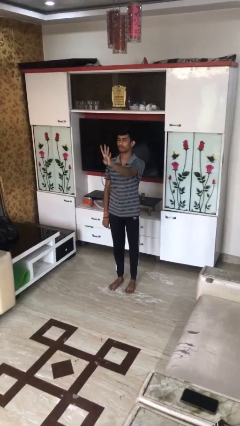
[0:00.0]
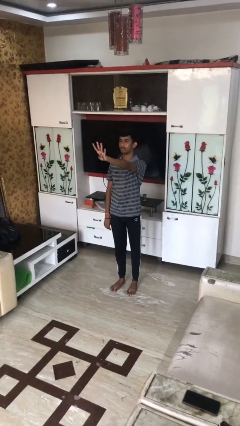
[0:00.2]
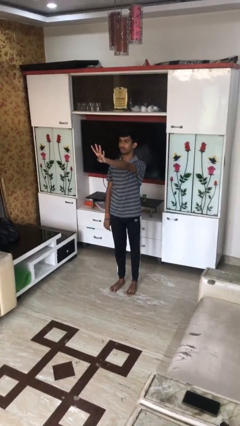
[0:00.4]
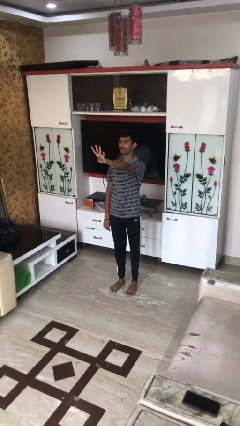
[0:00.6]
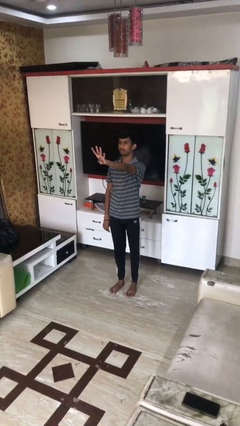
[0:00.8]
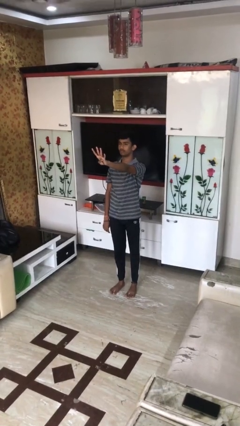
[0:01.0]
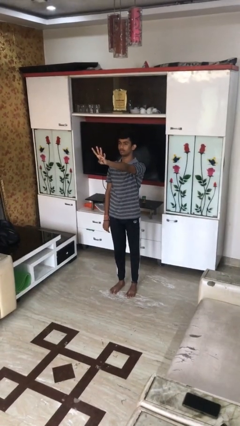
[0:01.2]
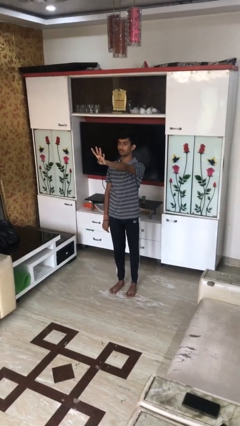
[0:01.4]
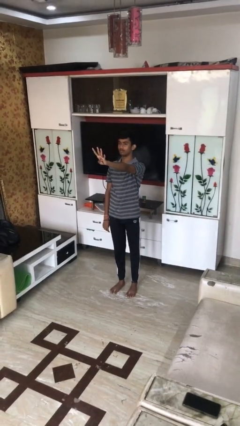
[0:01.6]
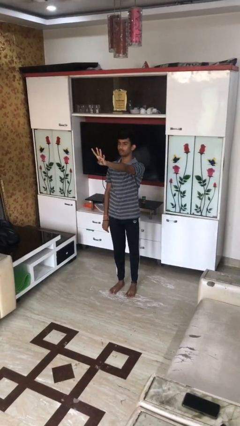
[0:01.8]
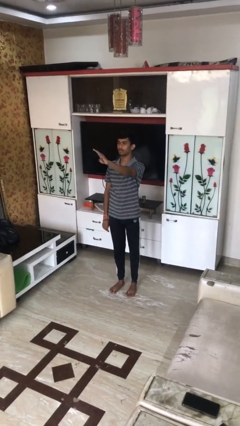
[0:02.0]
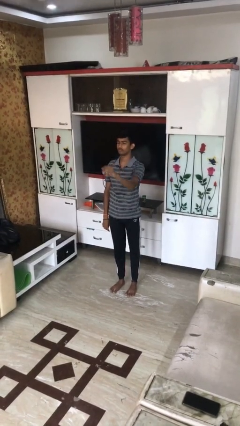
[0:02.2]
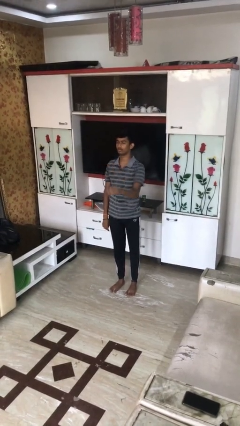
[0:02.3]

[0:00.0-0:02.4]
person gestures number four

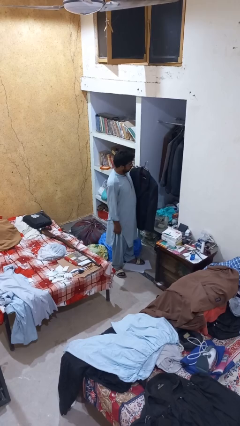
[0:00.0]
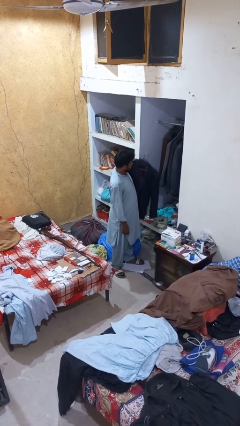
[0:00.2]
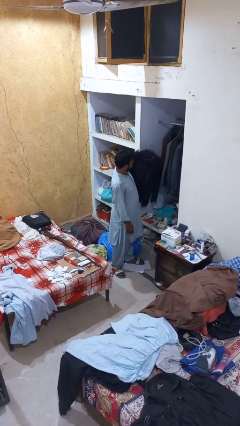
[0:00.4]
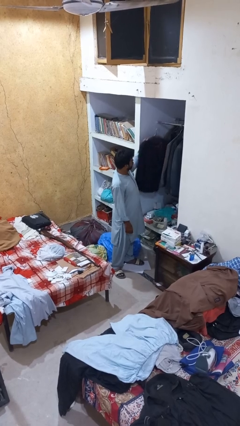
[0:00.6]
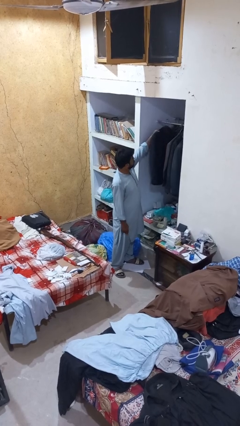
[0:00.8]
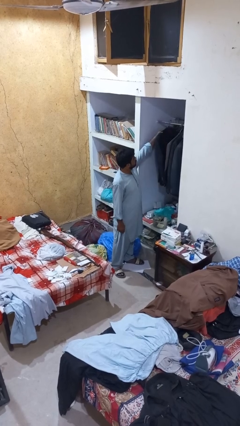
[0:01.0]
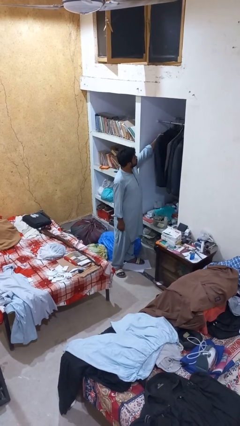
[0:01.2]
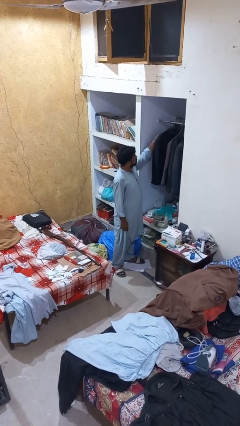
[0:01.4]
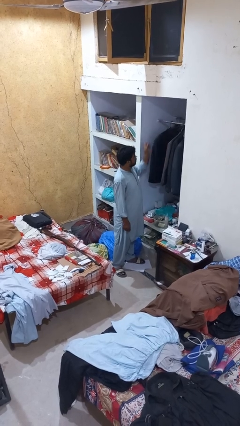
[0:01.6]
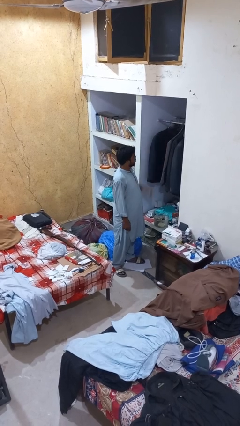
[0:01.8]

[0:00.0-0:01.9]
person puts clothes into closet

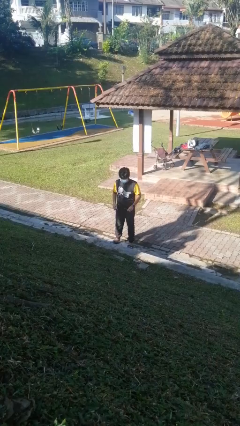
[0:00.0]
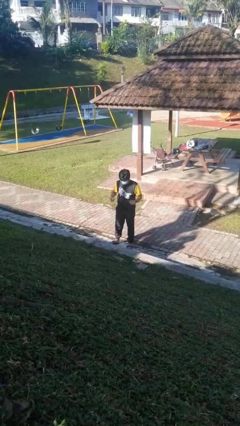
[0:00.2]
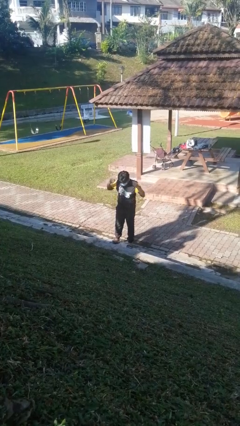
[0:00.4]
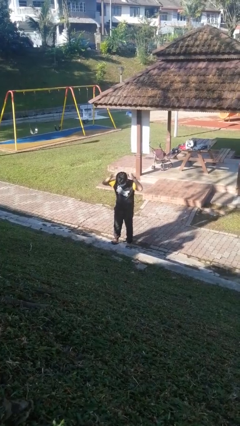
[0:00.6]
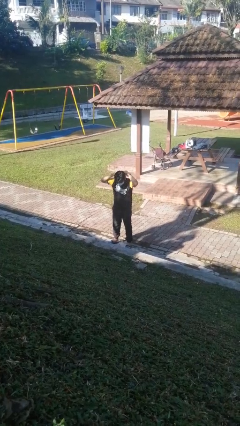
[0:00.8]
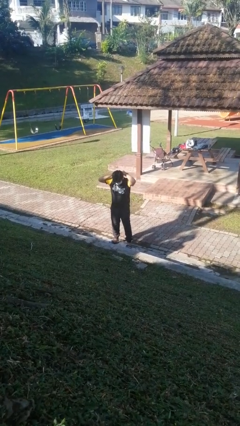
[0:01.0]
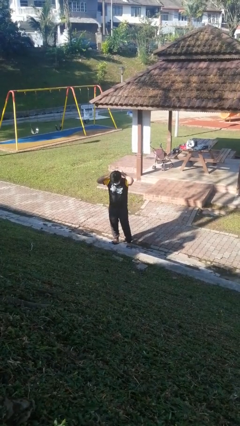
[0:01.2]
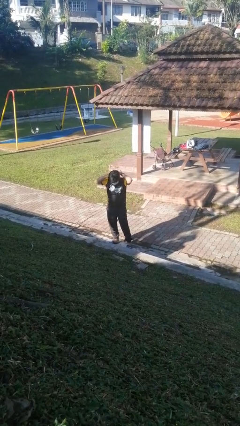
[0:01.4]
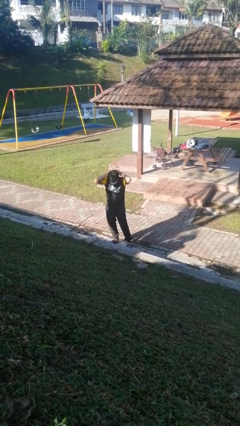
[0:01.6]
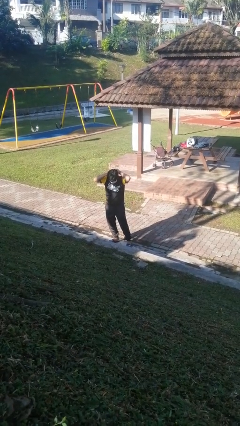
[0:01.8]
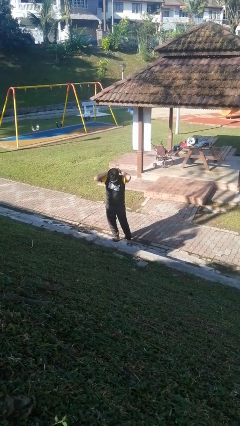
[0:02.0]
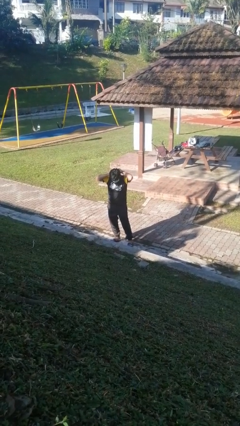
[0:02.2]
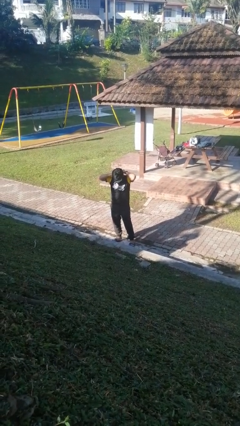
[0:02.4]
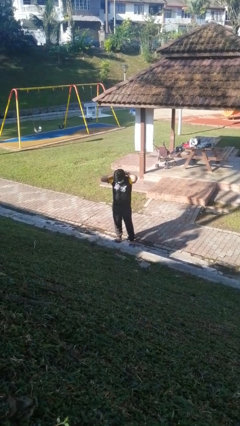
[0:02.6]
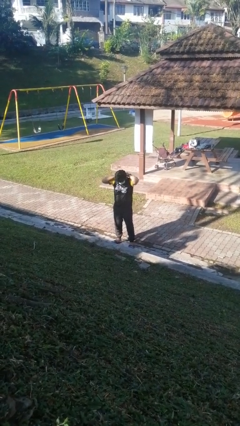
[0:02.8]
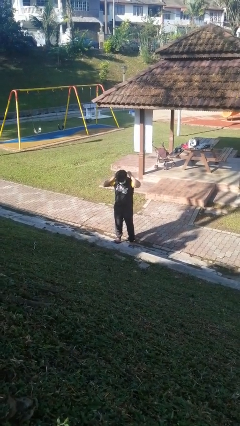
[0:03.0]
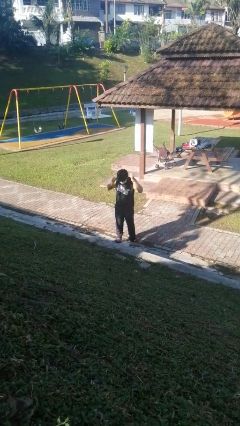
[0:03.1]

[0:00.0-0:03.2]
person puts on necklace

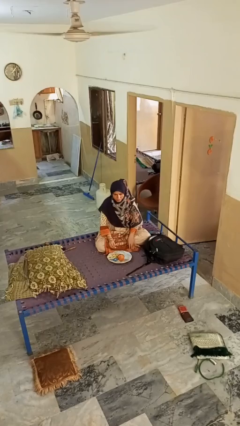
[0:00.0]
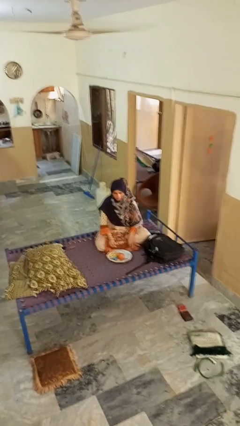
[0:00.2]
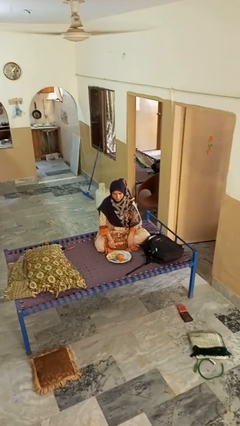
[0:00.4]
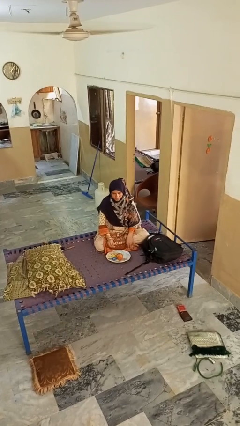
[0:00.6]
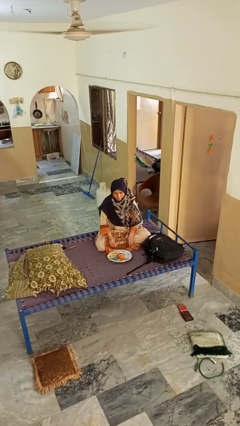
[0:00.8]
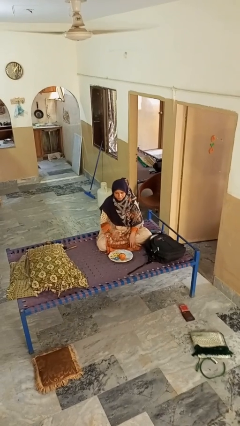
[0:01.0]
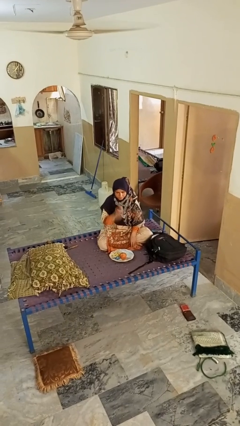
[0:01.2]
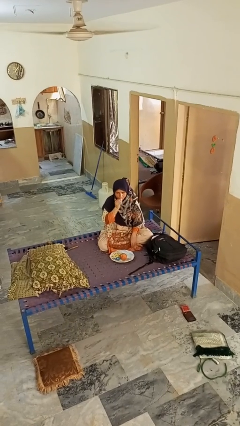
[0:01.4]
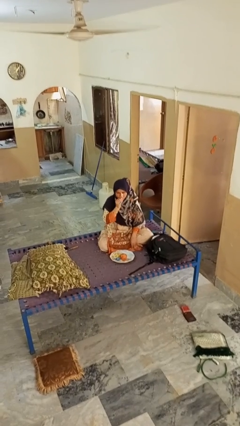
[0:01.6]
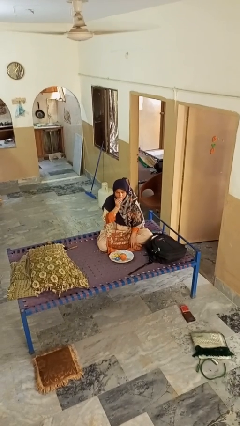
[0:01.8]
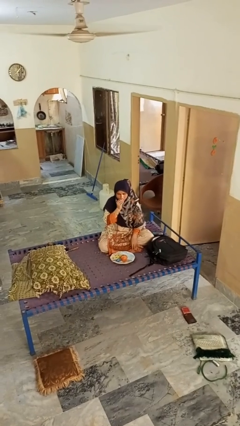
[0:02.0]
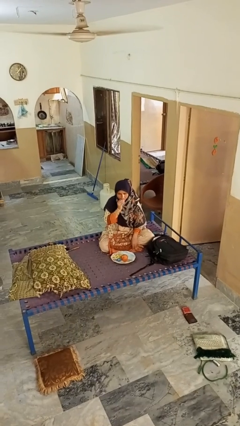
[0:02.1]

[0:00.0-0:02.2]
person eats apple

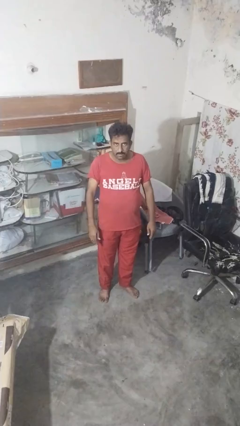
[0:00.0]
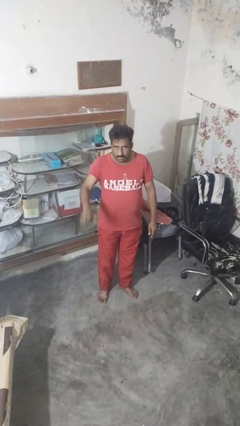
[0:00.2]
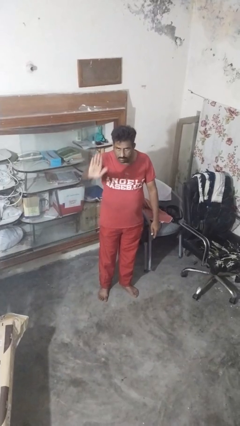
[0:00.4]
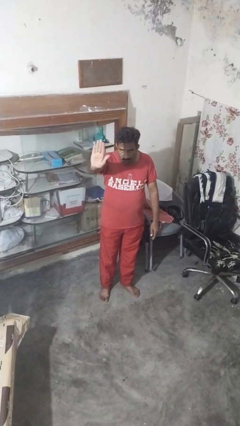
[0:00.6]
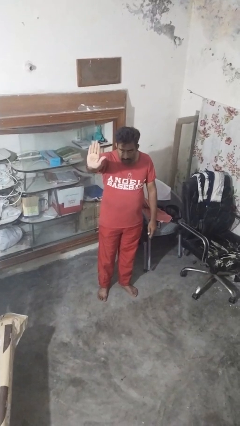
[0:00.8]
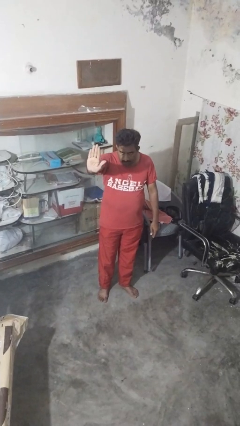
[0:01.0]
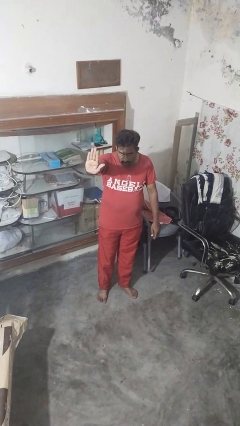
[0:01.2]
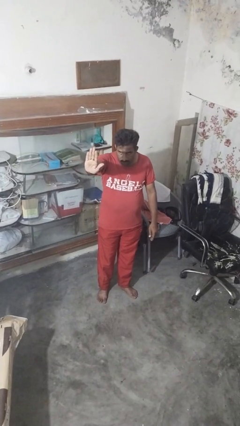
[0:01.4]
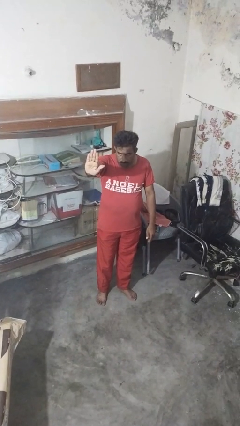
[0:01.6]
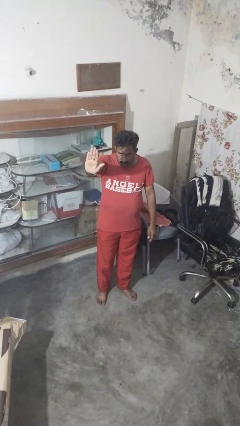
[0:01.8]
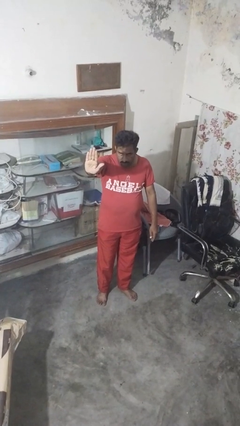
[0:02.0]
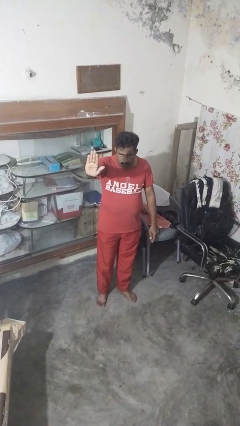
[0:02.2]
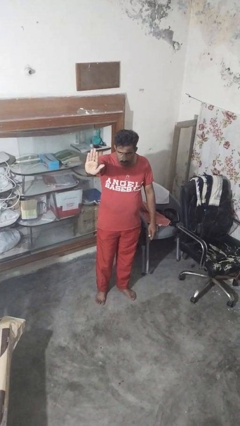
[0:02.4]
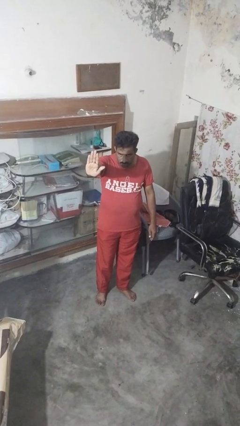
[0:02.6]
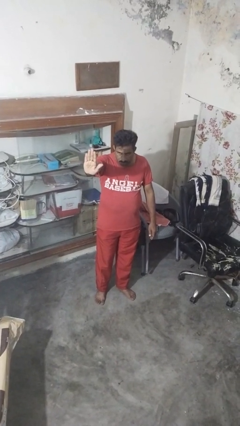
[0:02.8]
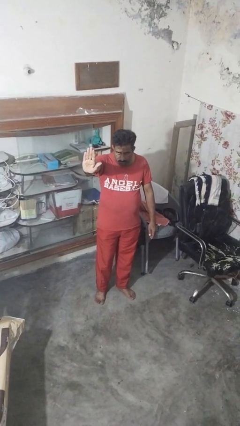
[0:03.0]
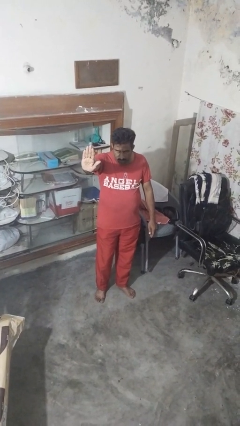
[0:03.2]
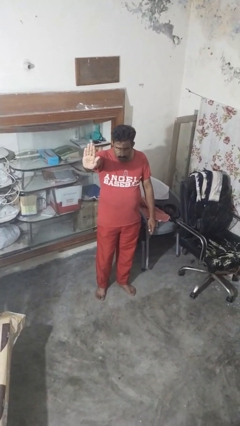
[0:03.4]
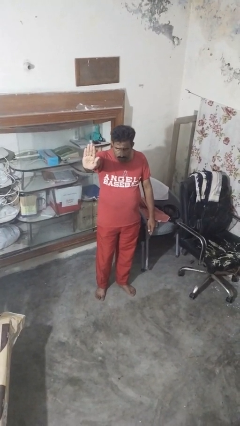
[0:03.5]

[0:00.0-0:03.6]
person gestures stop

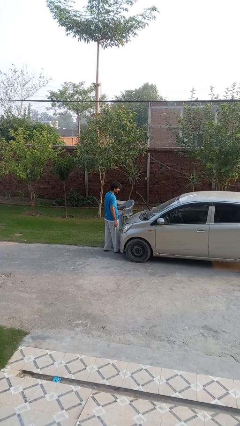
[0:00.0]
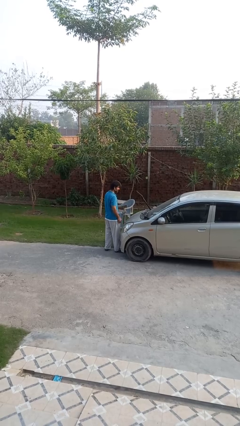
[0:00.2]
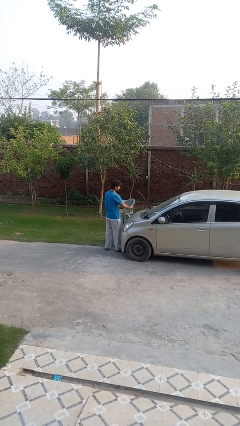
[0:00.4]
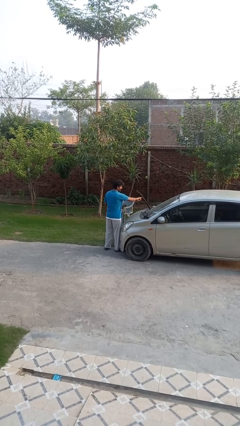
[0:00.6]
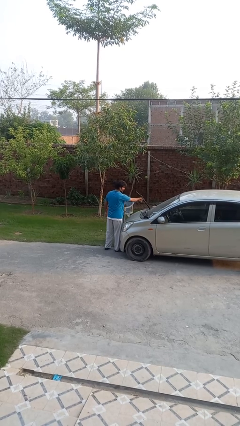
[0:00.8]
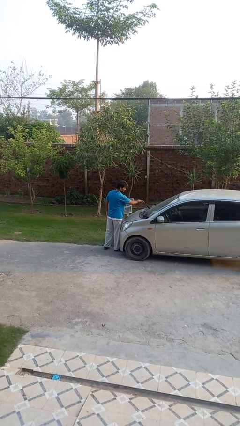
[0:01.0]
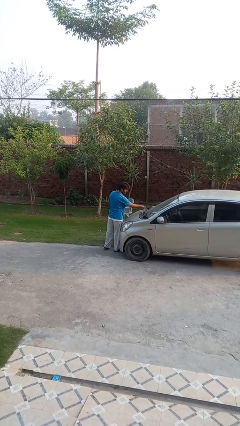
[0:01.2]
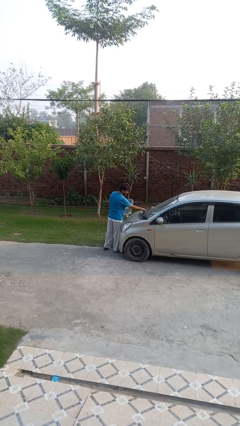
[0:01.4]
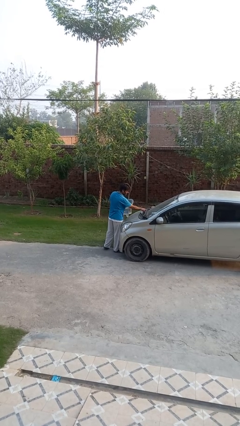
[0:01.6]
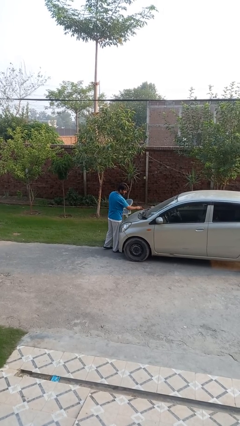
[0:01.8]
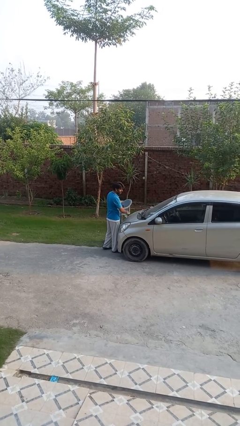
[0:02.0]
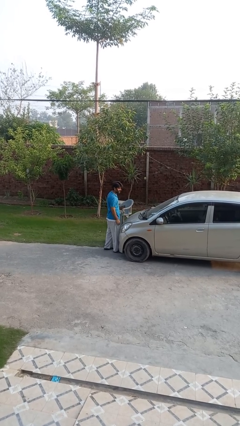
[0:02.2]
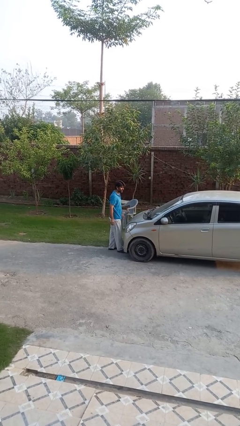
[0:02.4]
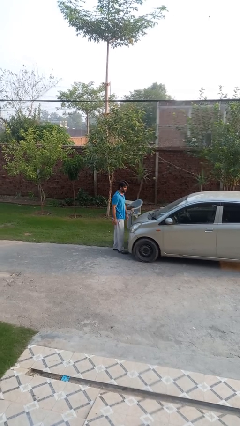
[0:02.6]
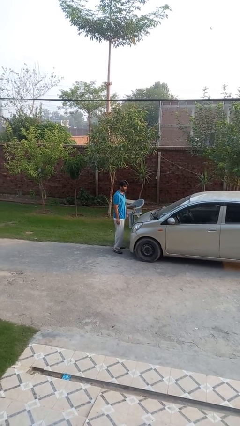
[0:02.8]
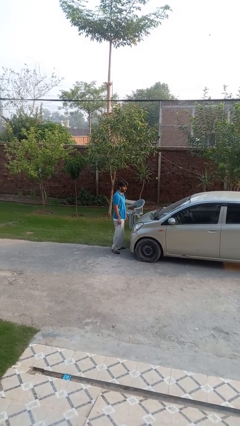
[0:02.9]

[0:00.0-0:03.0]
person flips down car wipers

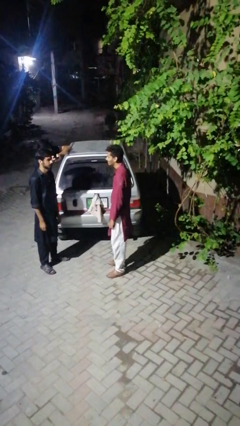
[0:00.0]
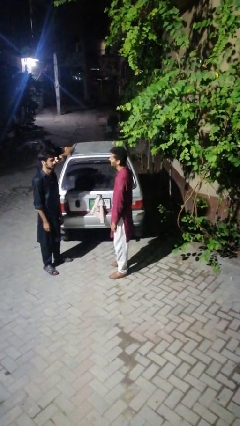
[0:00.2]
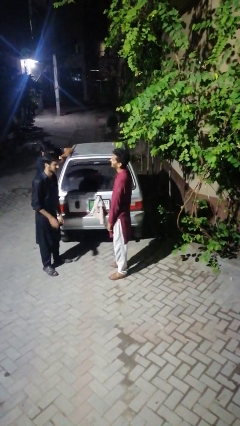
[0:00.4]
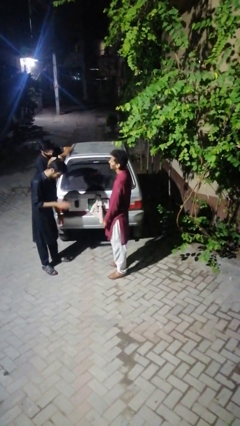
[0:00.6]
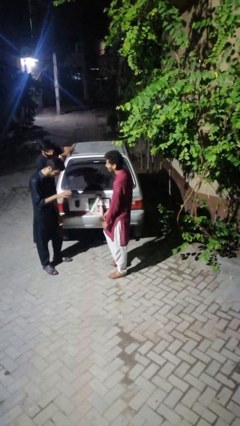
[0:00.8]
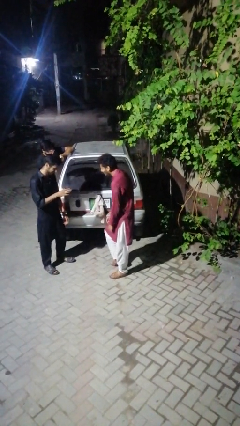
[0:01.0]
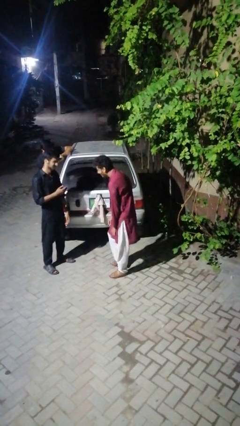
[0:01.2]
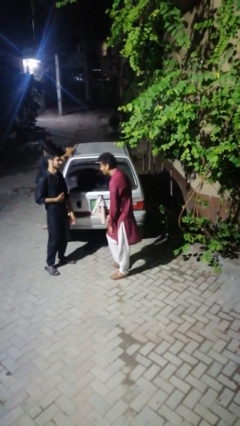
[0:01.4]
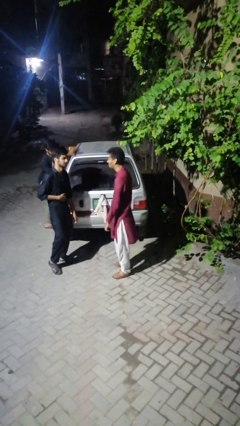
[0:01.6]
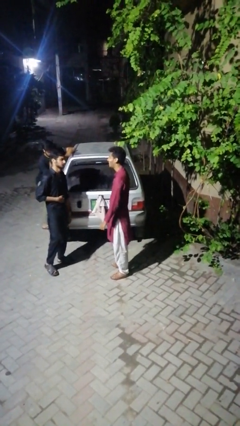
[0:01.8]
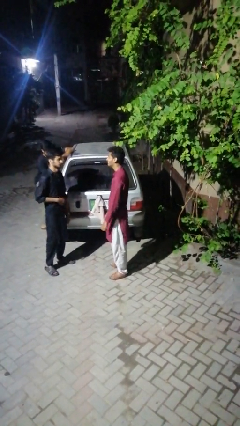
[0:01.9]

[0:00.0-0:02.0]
person laughs with person
